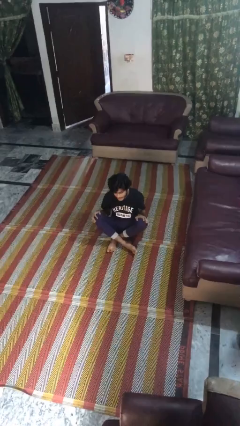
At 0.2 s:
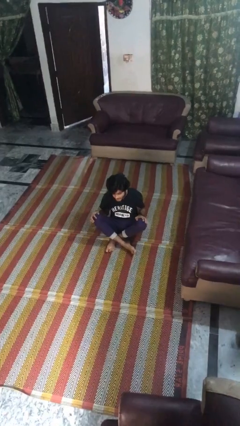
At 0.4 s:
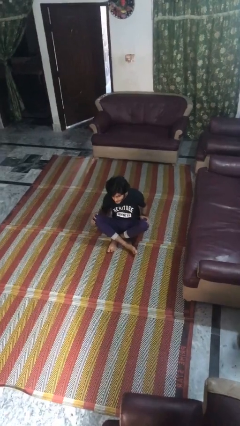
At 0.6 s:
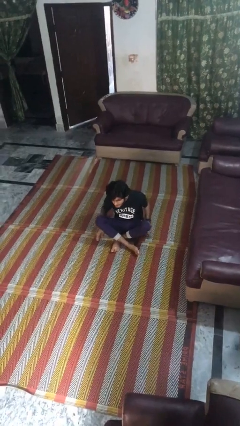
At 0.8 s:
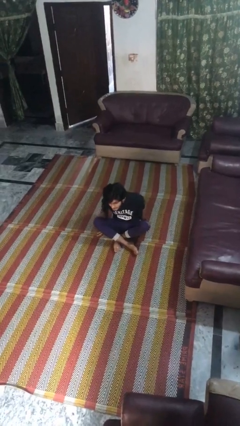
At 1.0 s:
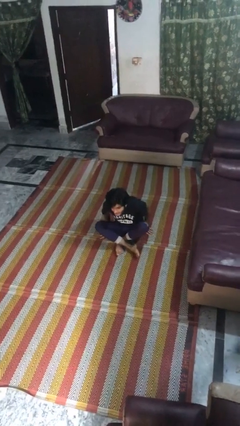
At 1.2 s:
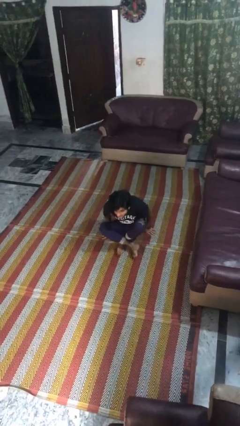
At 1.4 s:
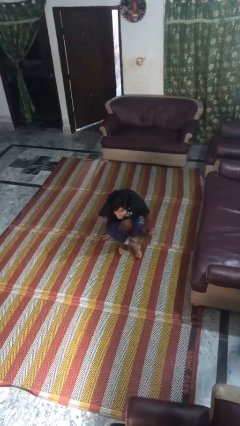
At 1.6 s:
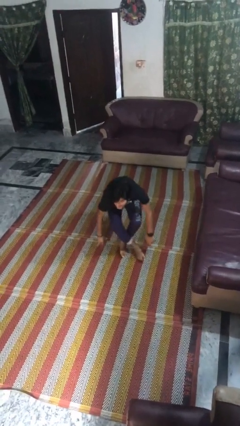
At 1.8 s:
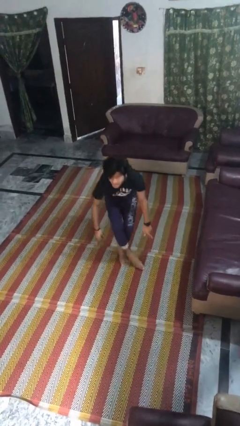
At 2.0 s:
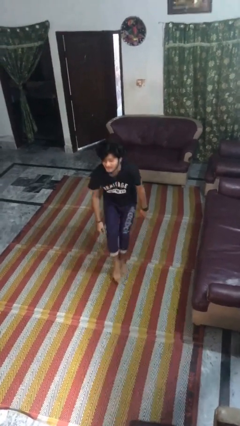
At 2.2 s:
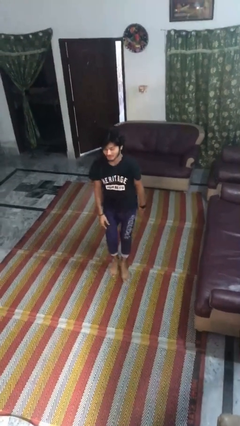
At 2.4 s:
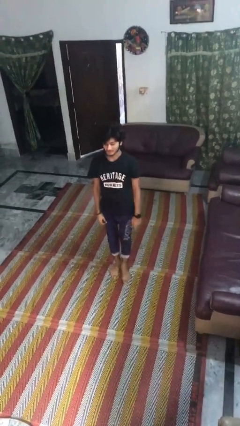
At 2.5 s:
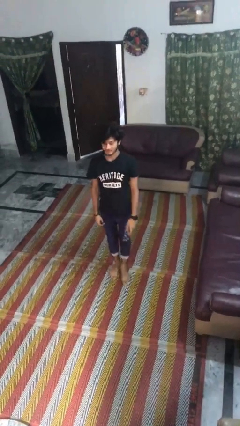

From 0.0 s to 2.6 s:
person stands up from floor

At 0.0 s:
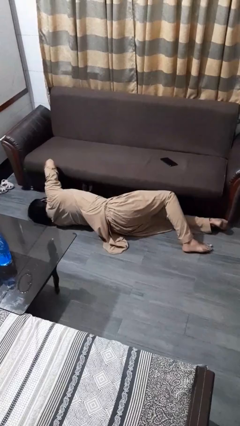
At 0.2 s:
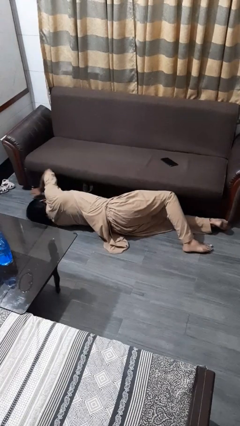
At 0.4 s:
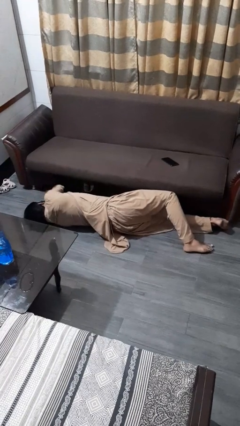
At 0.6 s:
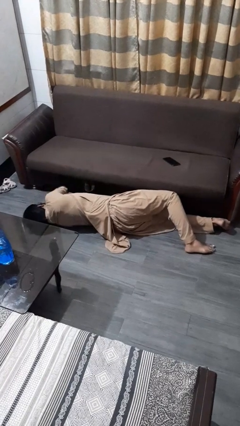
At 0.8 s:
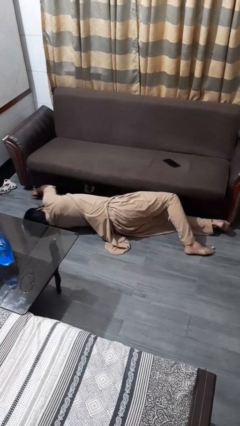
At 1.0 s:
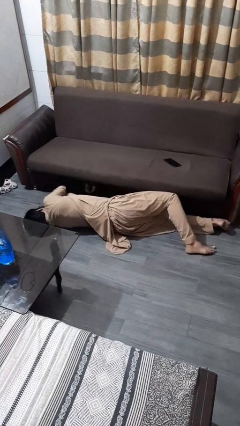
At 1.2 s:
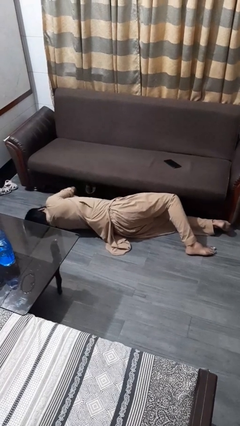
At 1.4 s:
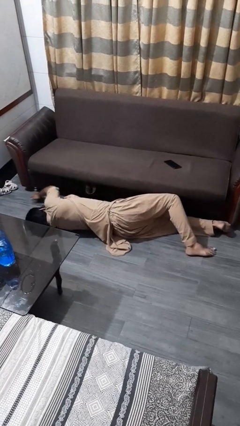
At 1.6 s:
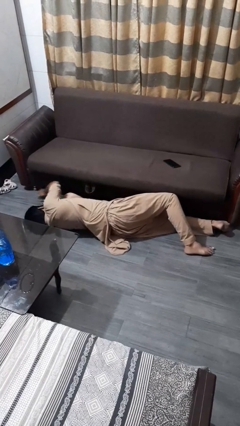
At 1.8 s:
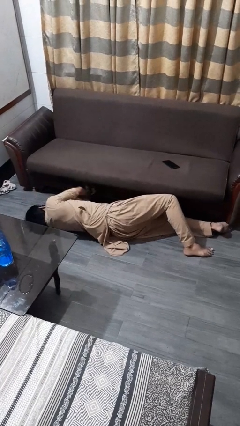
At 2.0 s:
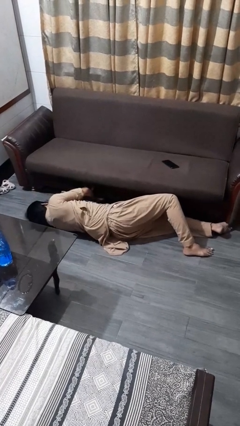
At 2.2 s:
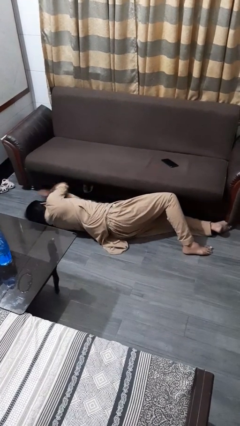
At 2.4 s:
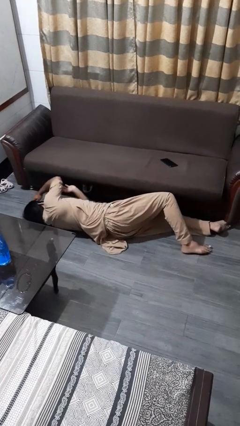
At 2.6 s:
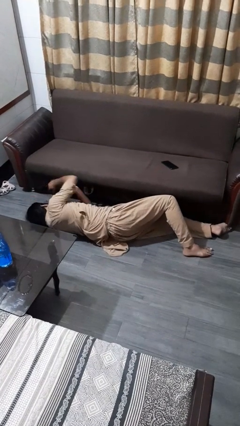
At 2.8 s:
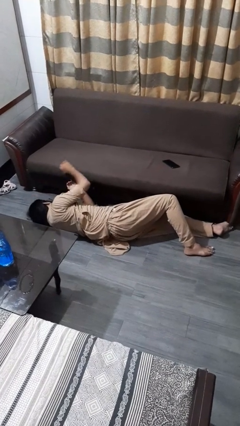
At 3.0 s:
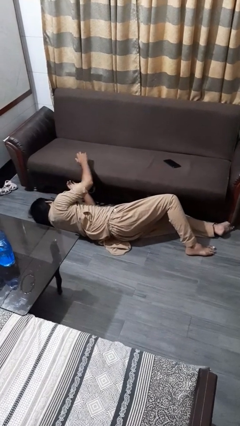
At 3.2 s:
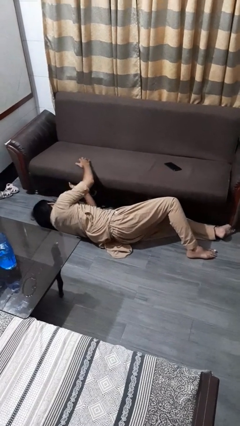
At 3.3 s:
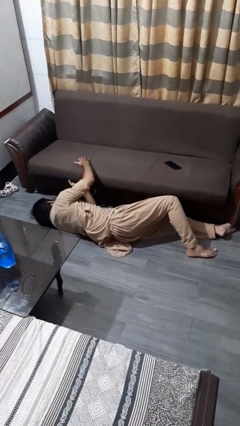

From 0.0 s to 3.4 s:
person searches under couch

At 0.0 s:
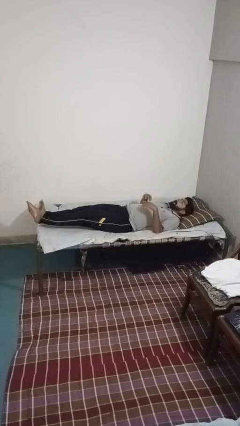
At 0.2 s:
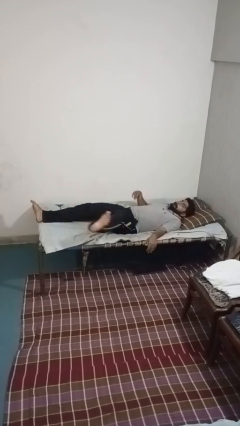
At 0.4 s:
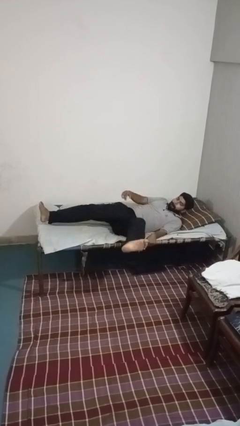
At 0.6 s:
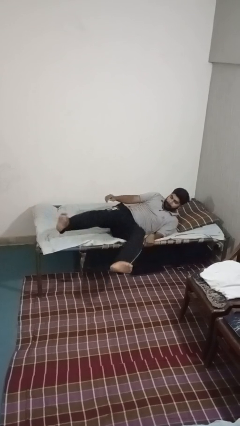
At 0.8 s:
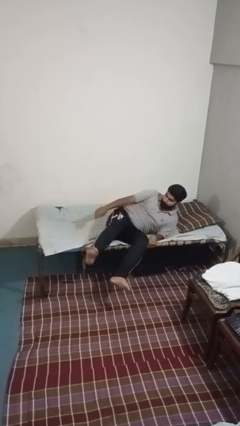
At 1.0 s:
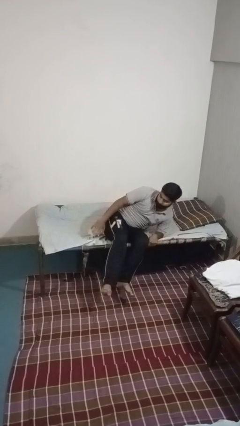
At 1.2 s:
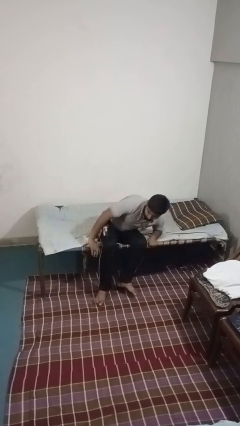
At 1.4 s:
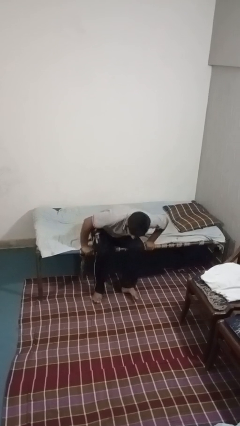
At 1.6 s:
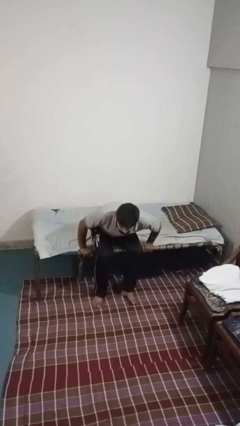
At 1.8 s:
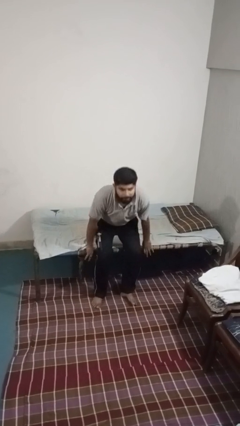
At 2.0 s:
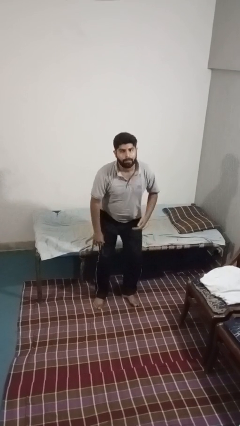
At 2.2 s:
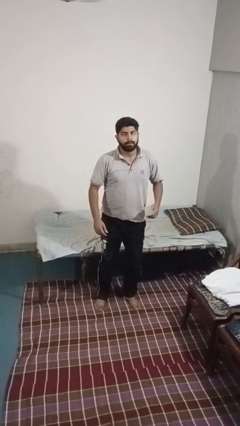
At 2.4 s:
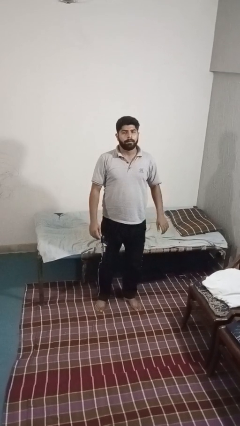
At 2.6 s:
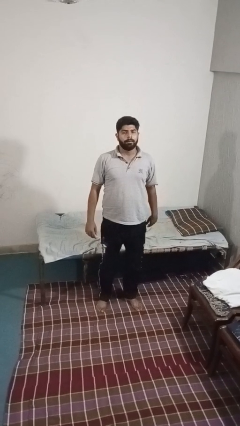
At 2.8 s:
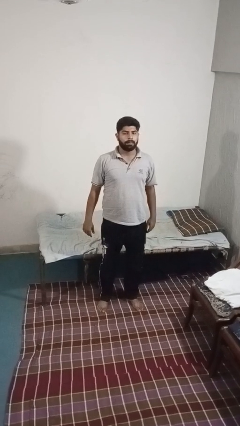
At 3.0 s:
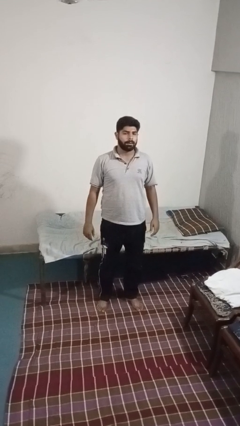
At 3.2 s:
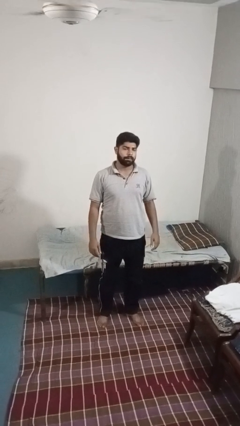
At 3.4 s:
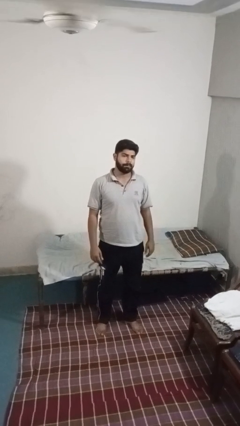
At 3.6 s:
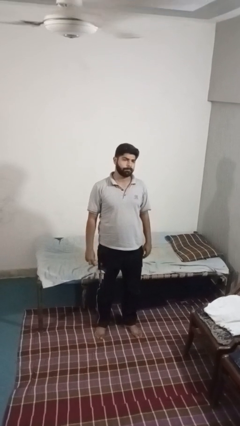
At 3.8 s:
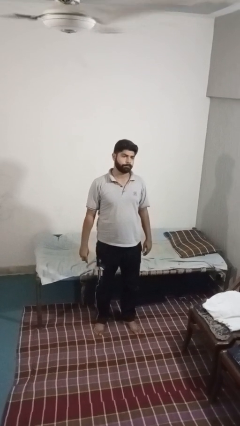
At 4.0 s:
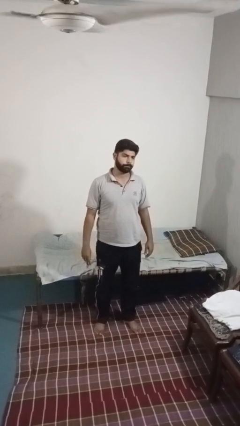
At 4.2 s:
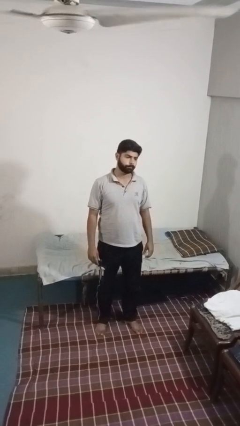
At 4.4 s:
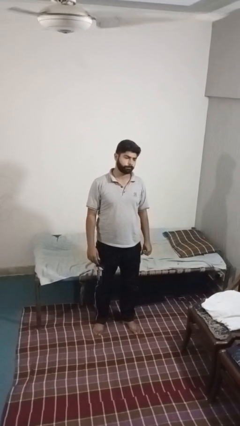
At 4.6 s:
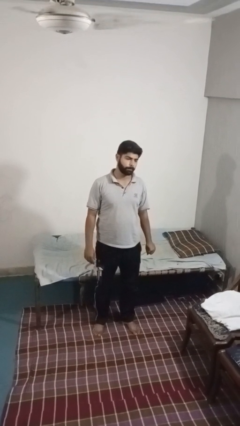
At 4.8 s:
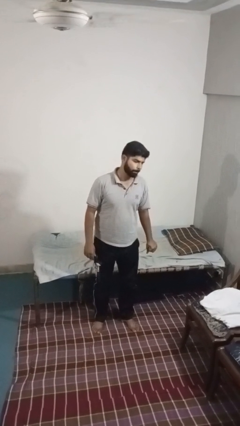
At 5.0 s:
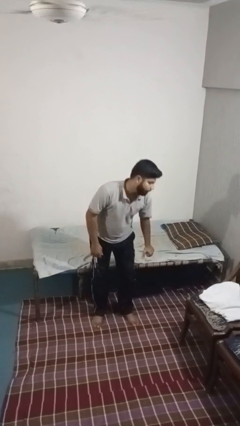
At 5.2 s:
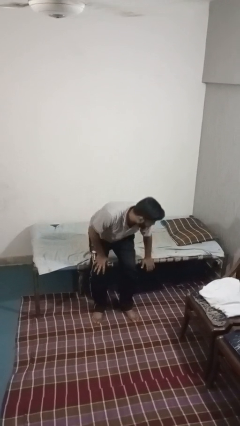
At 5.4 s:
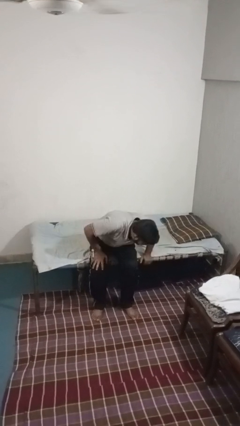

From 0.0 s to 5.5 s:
person stands up

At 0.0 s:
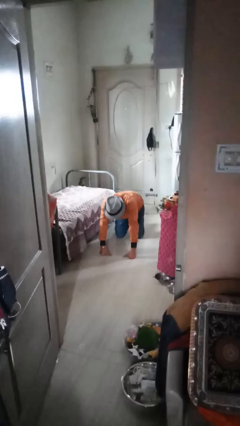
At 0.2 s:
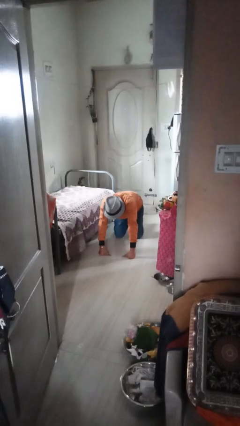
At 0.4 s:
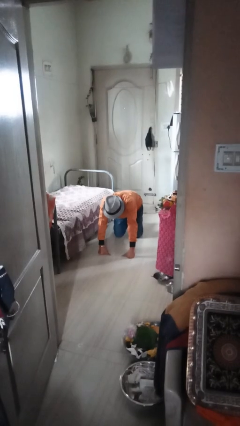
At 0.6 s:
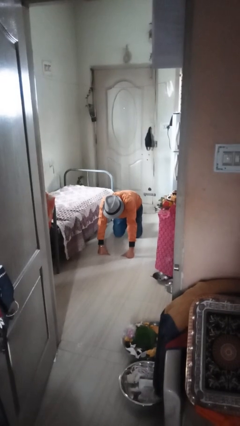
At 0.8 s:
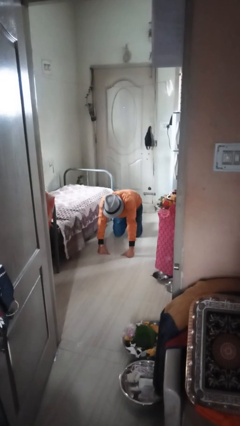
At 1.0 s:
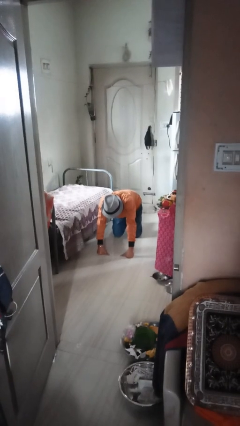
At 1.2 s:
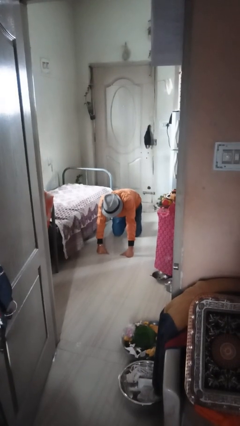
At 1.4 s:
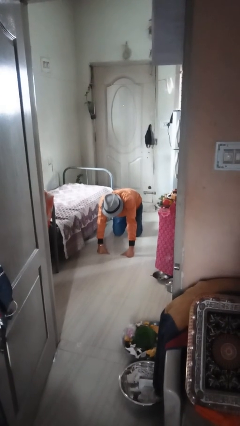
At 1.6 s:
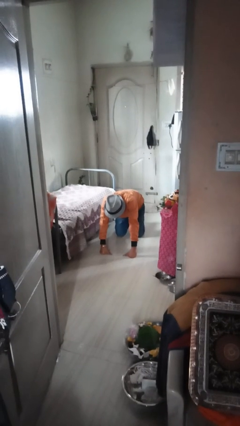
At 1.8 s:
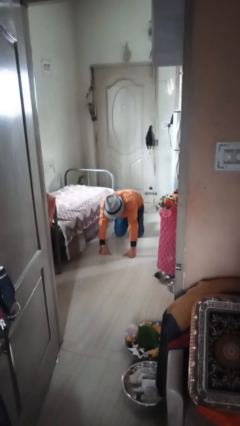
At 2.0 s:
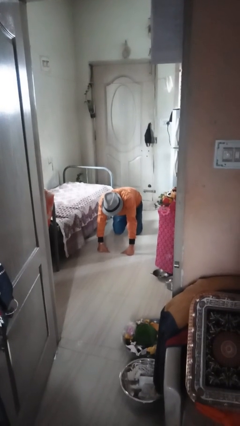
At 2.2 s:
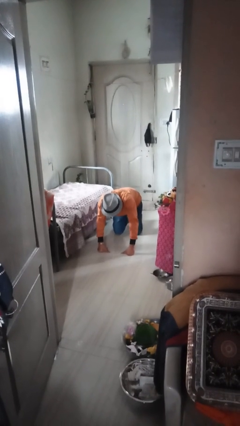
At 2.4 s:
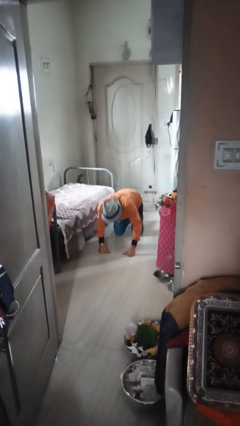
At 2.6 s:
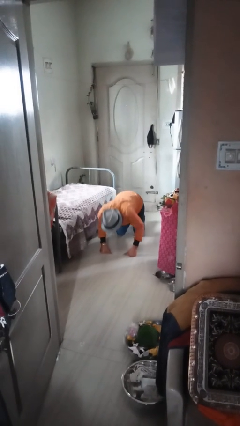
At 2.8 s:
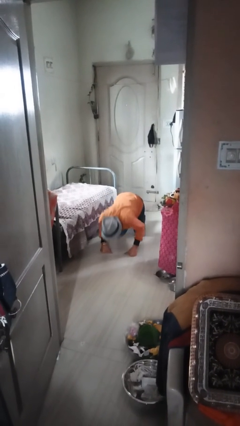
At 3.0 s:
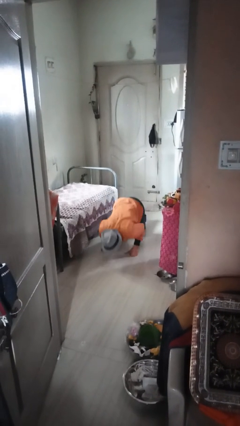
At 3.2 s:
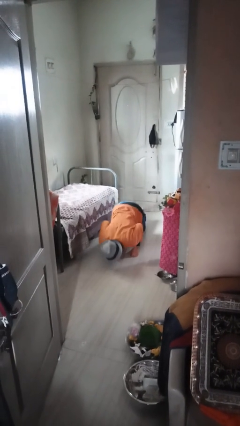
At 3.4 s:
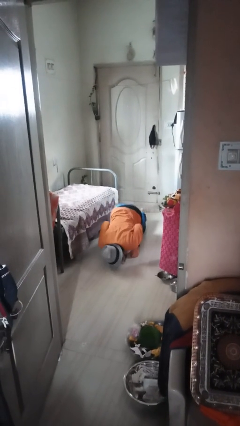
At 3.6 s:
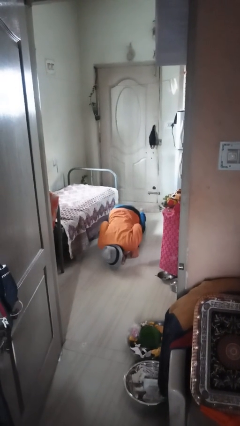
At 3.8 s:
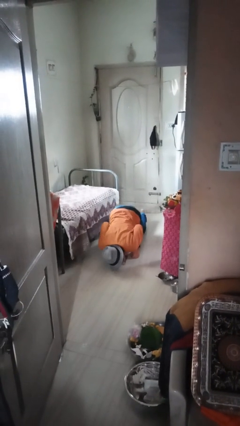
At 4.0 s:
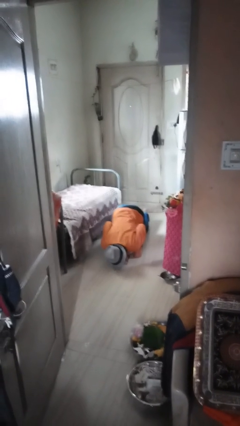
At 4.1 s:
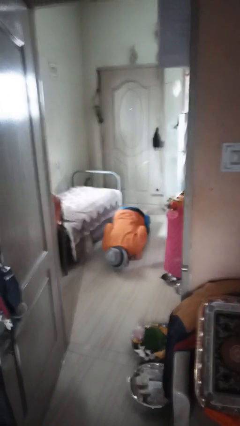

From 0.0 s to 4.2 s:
person exercises with pushup

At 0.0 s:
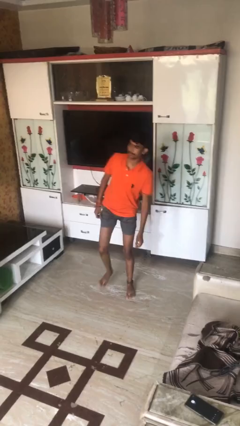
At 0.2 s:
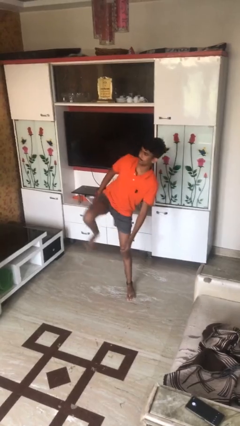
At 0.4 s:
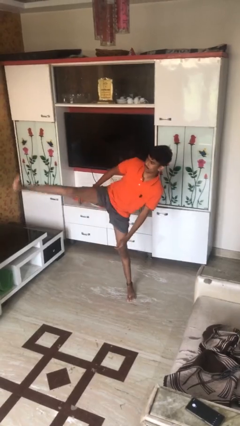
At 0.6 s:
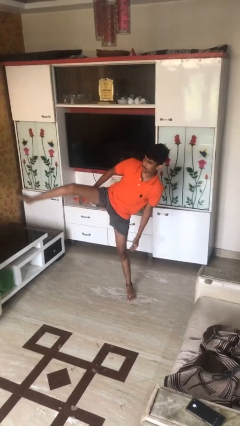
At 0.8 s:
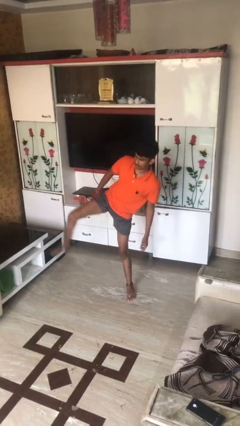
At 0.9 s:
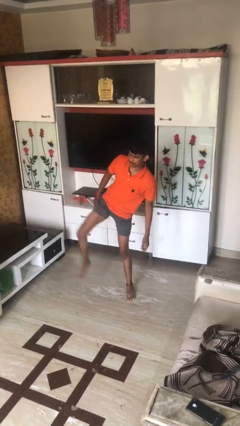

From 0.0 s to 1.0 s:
person karate kicks

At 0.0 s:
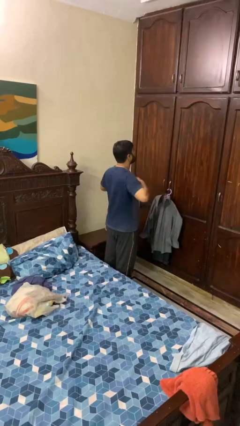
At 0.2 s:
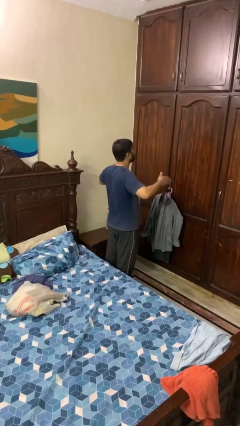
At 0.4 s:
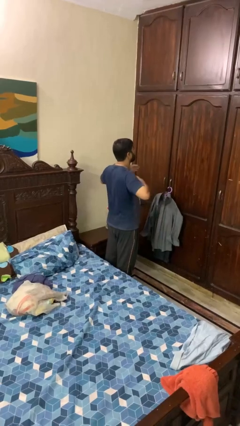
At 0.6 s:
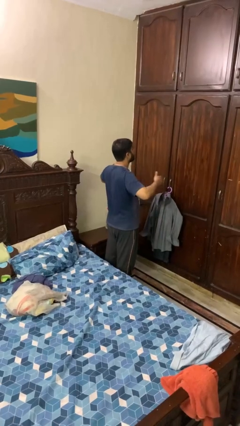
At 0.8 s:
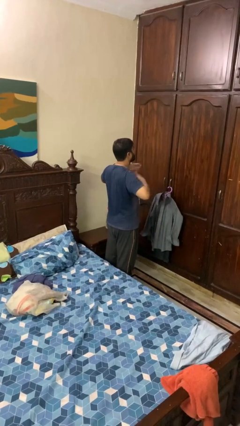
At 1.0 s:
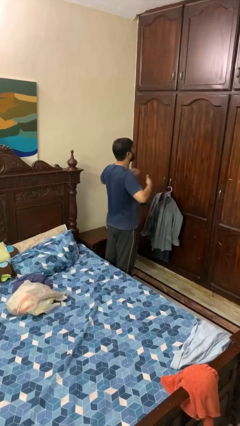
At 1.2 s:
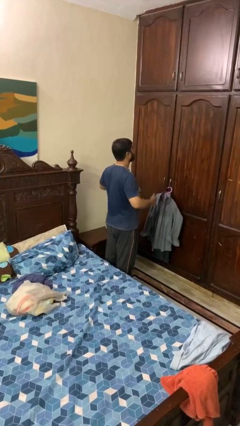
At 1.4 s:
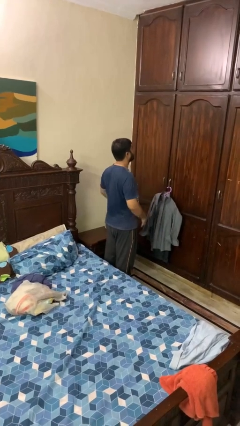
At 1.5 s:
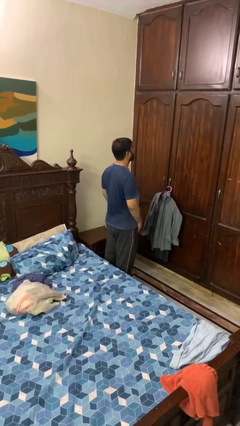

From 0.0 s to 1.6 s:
person drums on chest
